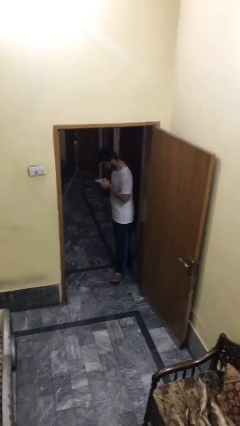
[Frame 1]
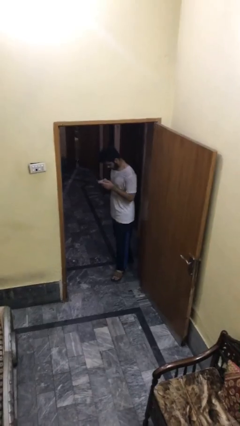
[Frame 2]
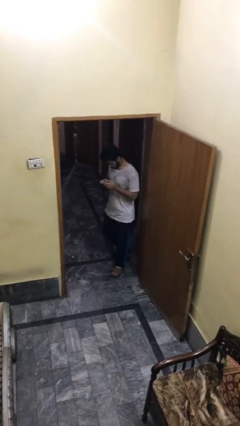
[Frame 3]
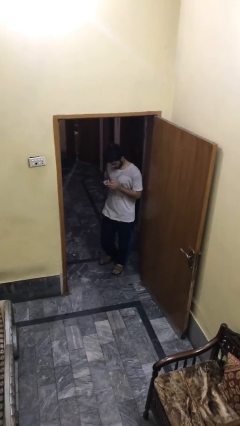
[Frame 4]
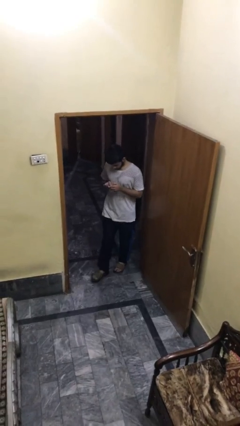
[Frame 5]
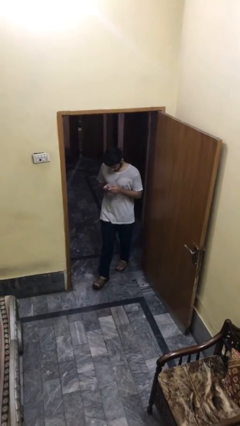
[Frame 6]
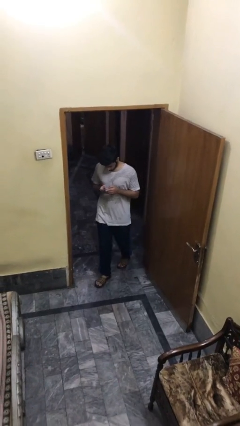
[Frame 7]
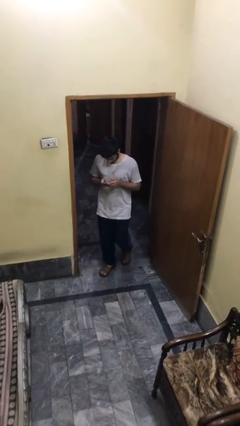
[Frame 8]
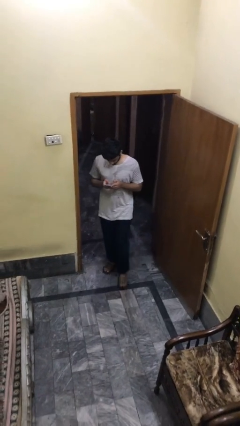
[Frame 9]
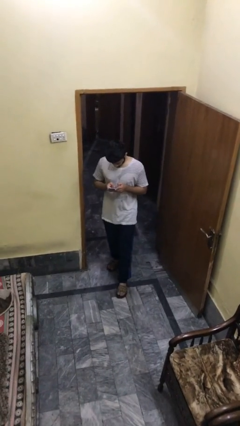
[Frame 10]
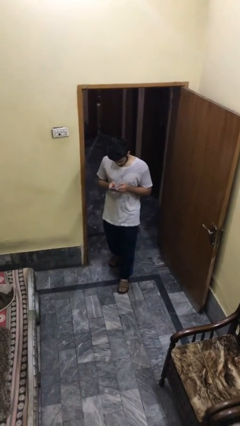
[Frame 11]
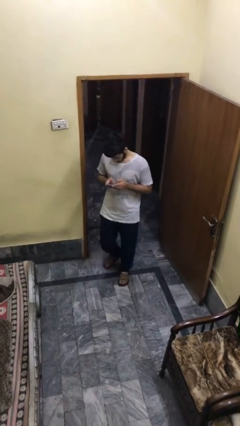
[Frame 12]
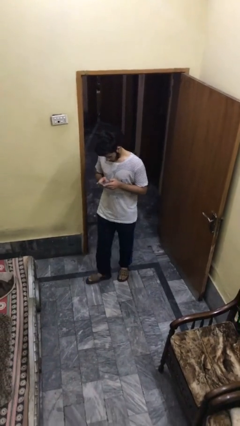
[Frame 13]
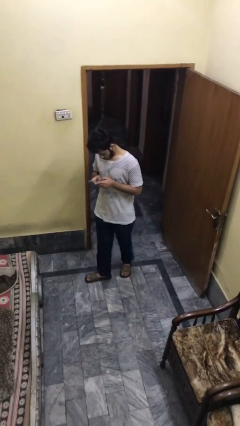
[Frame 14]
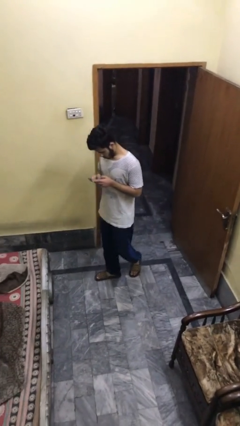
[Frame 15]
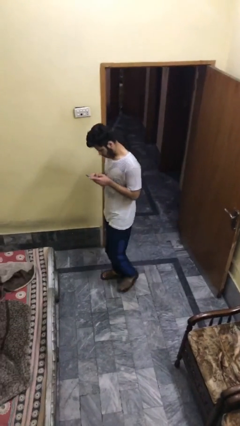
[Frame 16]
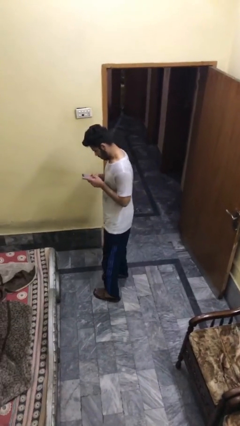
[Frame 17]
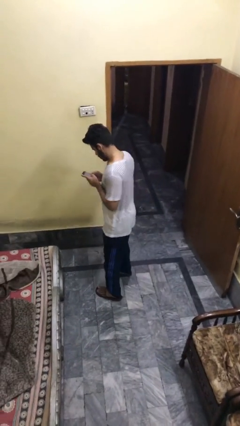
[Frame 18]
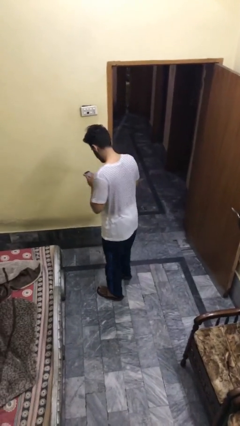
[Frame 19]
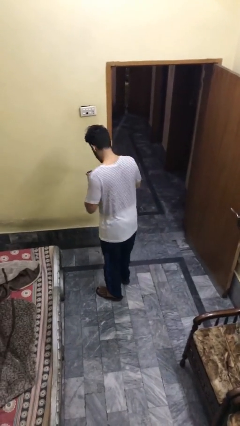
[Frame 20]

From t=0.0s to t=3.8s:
person enters scene through structure

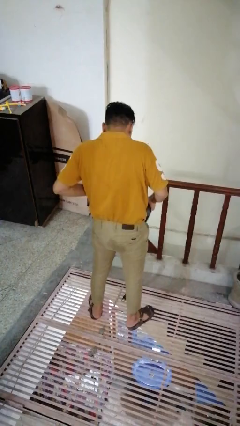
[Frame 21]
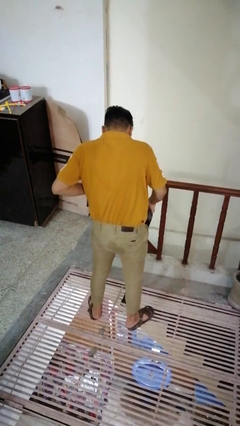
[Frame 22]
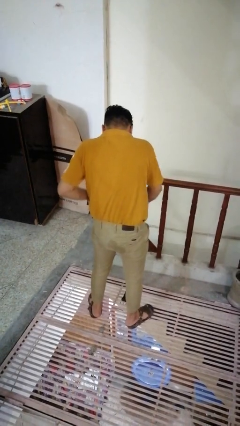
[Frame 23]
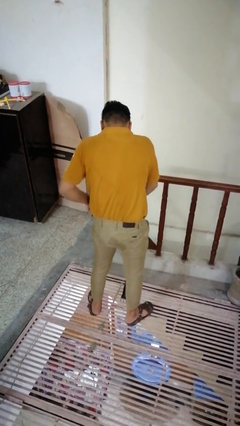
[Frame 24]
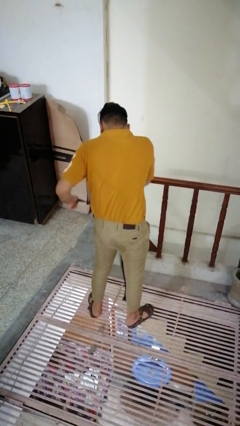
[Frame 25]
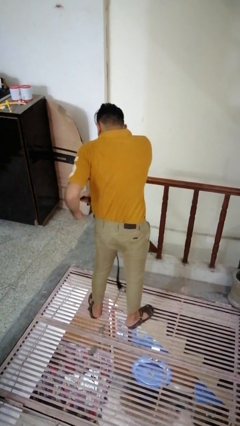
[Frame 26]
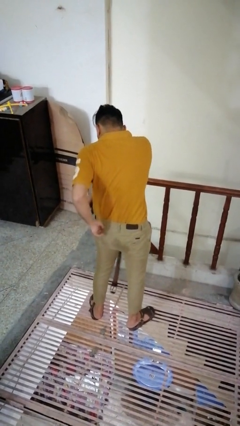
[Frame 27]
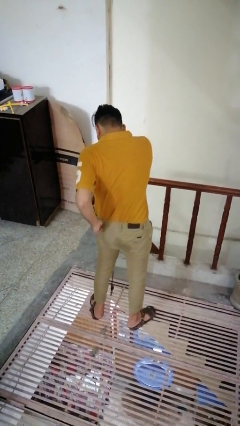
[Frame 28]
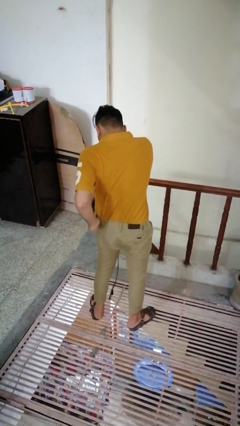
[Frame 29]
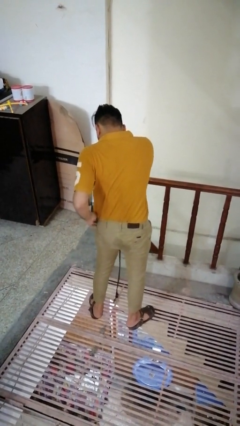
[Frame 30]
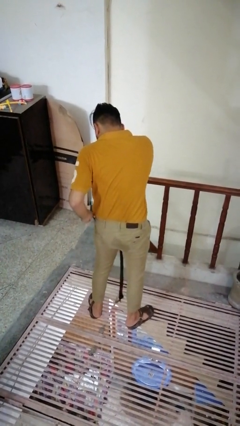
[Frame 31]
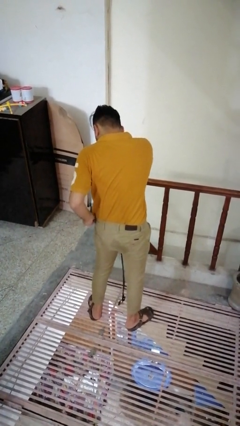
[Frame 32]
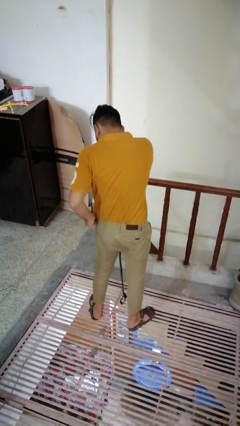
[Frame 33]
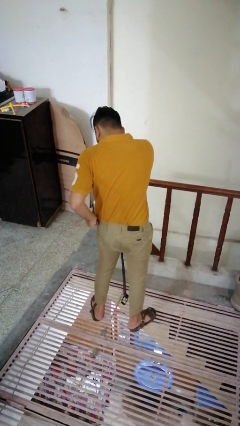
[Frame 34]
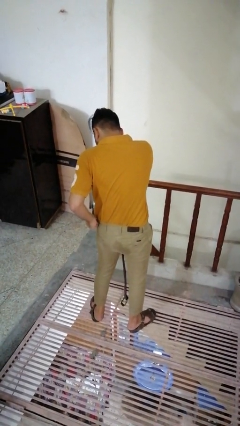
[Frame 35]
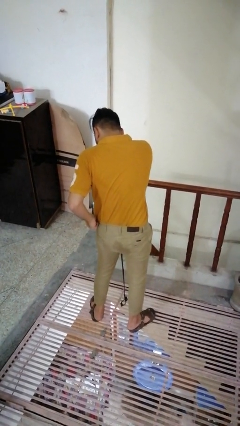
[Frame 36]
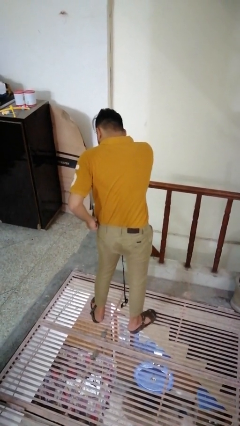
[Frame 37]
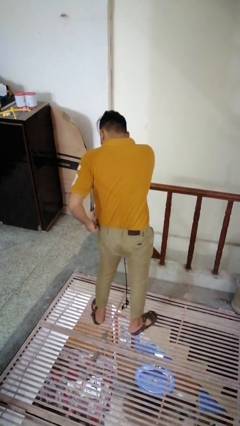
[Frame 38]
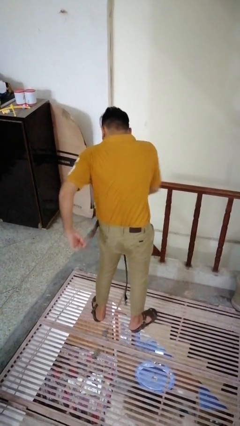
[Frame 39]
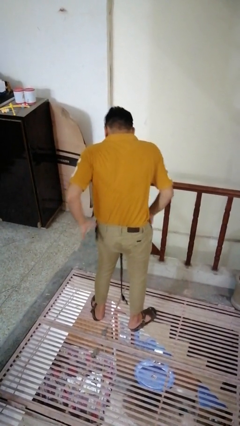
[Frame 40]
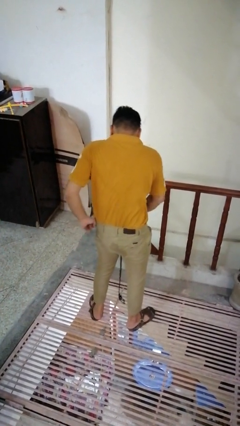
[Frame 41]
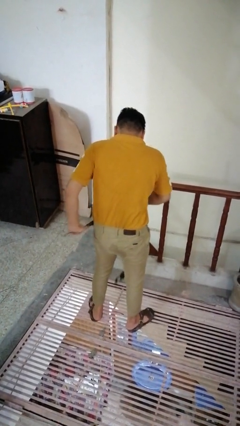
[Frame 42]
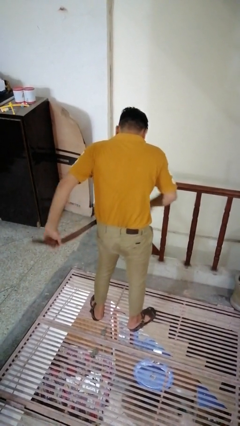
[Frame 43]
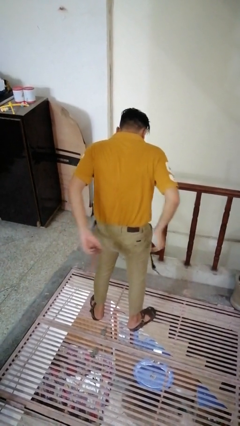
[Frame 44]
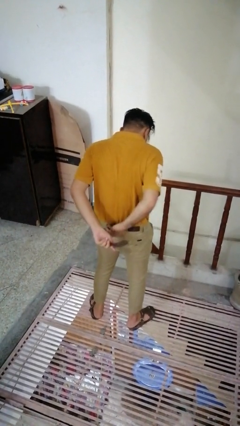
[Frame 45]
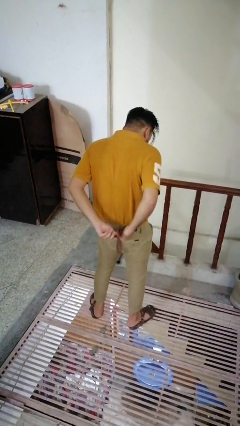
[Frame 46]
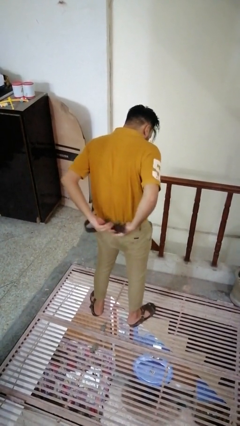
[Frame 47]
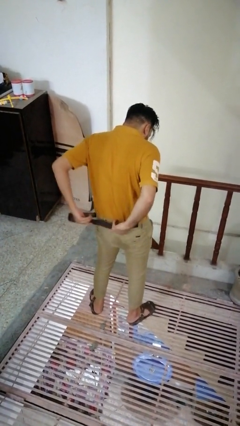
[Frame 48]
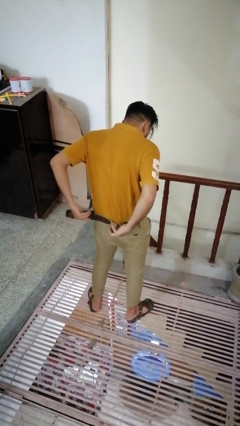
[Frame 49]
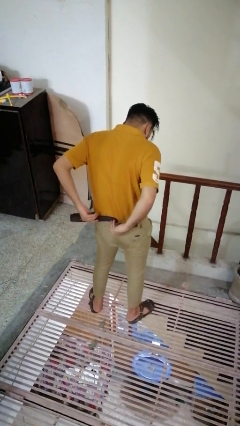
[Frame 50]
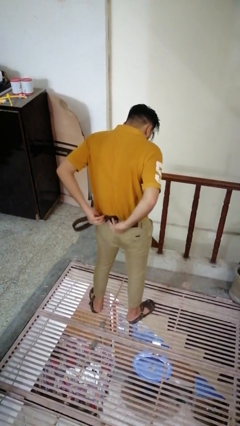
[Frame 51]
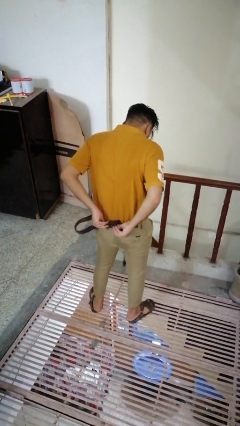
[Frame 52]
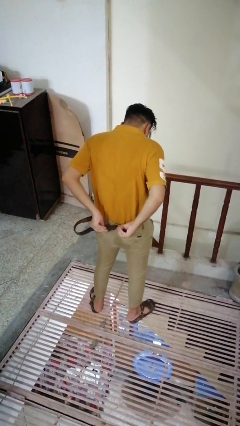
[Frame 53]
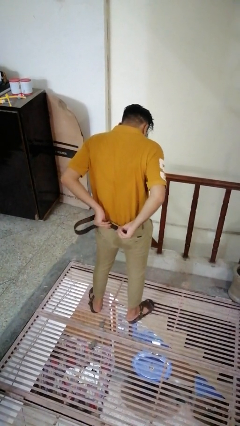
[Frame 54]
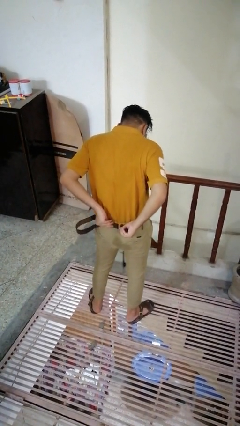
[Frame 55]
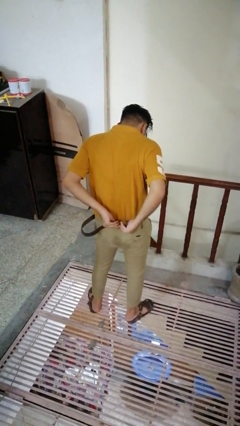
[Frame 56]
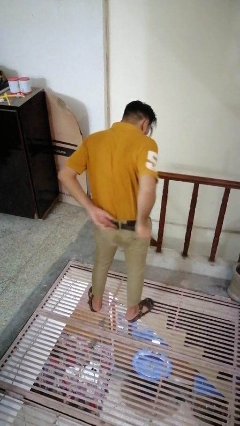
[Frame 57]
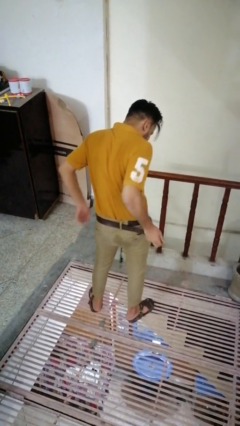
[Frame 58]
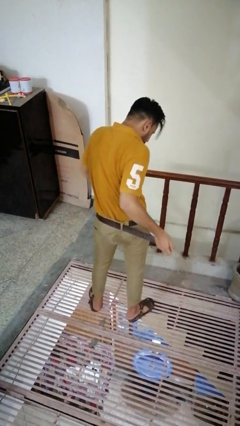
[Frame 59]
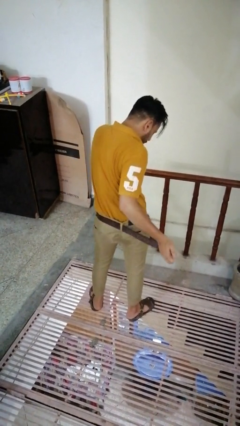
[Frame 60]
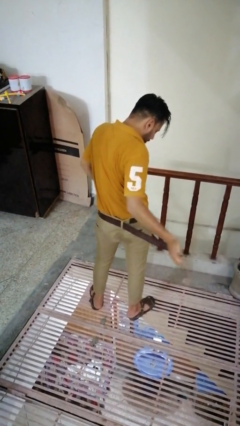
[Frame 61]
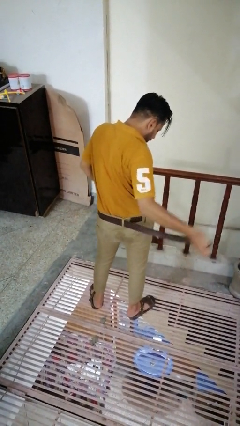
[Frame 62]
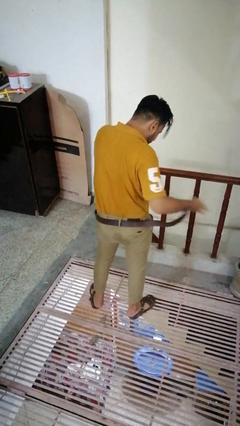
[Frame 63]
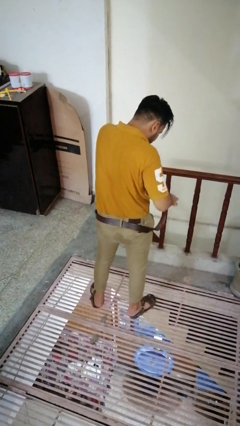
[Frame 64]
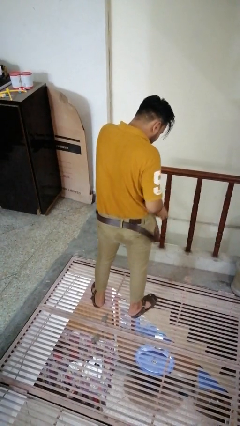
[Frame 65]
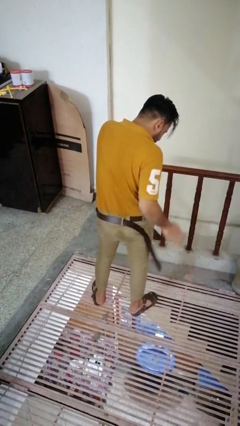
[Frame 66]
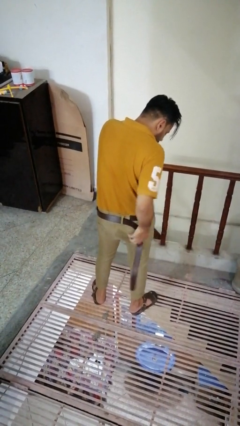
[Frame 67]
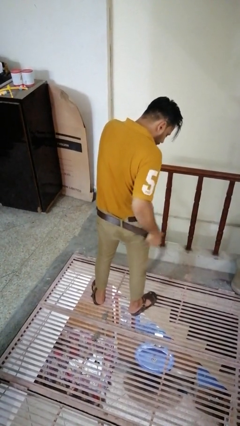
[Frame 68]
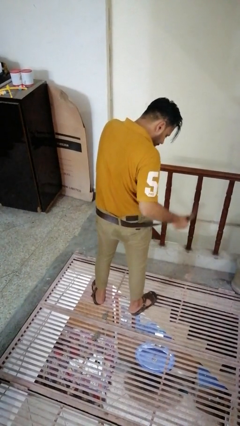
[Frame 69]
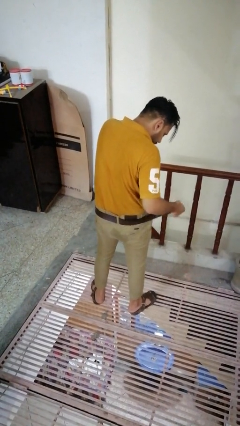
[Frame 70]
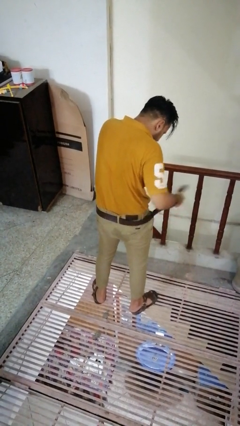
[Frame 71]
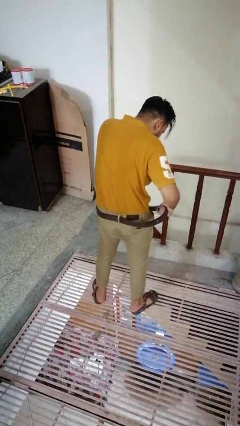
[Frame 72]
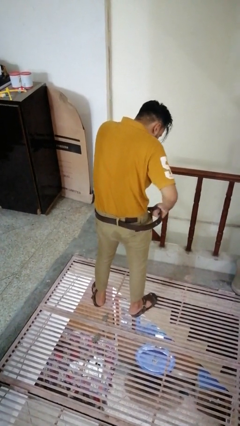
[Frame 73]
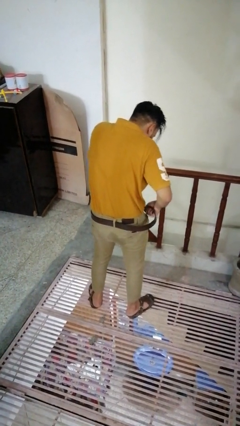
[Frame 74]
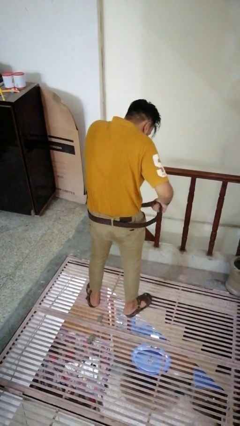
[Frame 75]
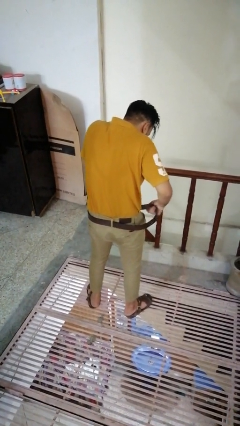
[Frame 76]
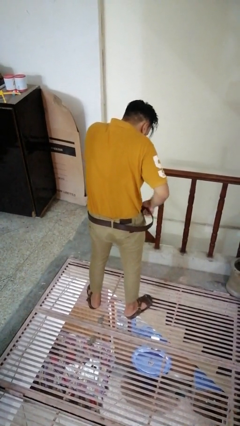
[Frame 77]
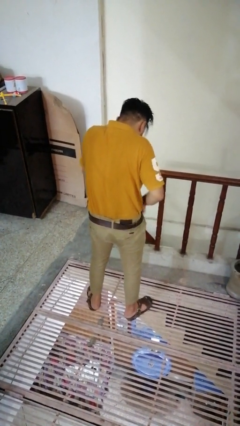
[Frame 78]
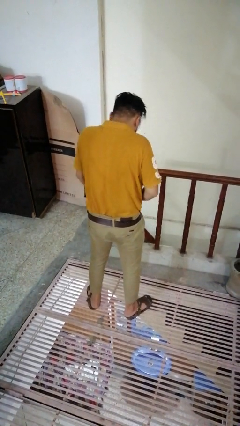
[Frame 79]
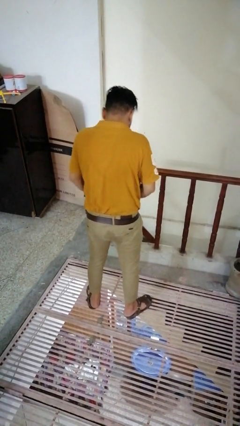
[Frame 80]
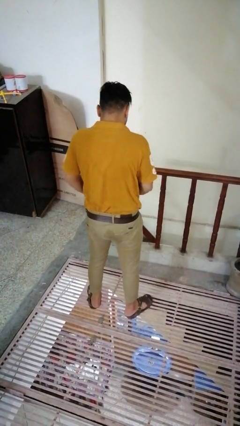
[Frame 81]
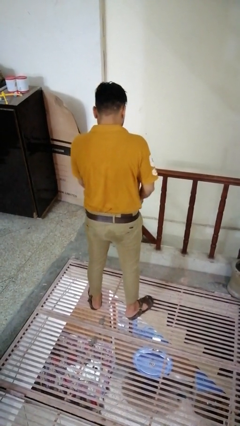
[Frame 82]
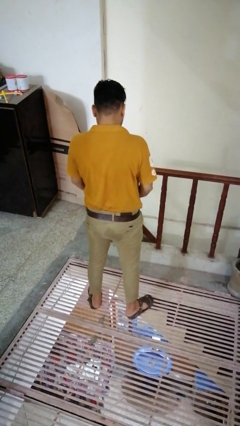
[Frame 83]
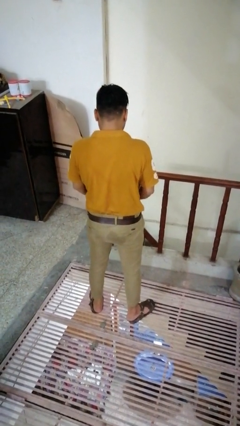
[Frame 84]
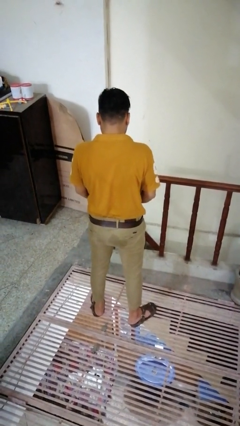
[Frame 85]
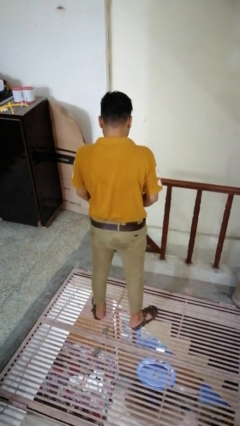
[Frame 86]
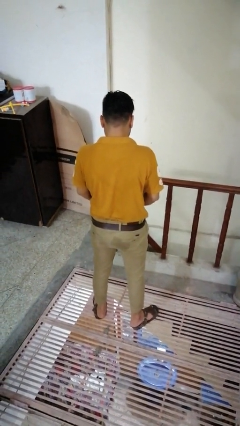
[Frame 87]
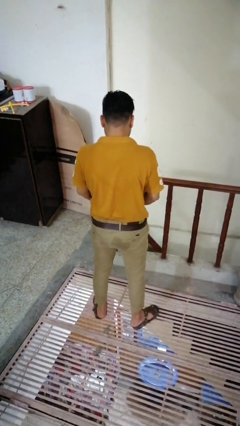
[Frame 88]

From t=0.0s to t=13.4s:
person puts on belt

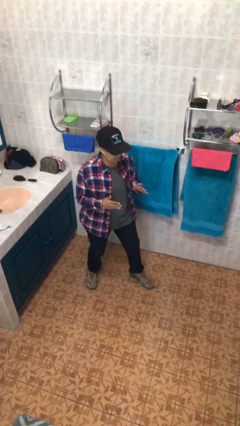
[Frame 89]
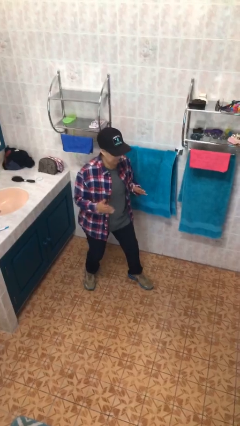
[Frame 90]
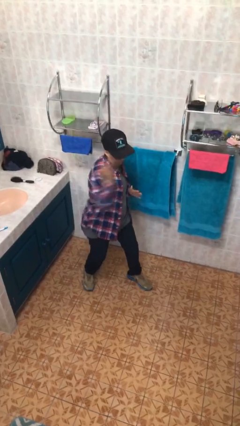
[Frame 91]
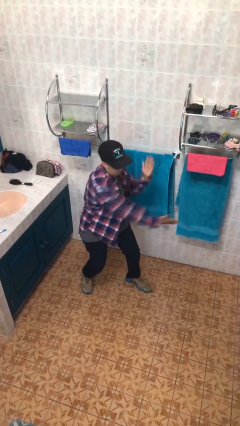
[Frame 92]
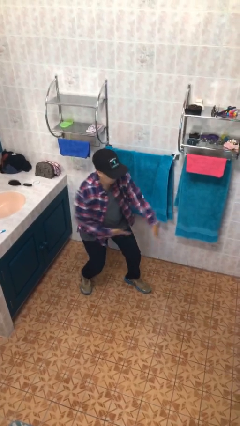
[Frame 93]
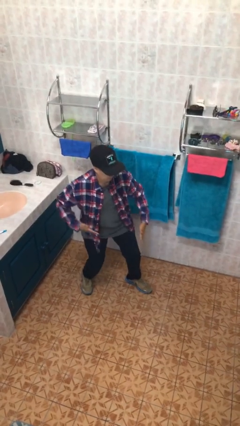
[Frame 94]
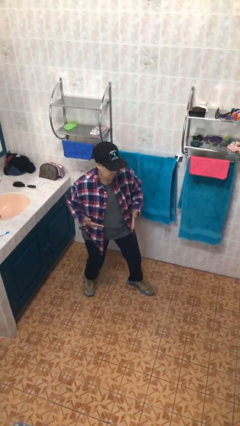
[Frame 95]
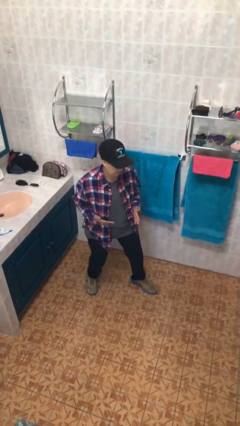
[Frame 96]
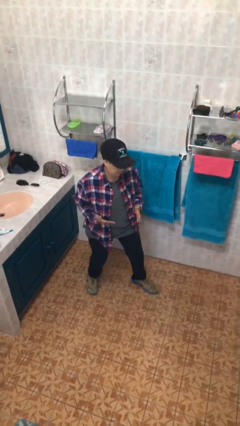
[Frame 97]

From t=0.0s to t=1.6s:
person karate chop
